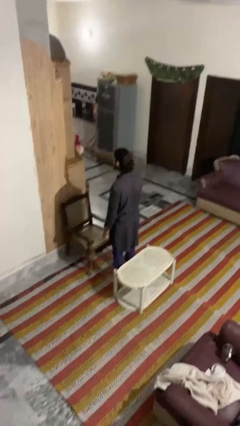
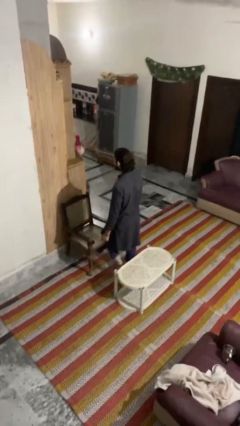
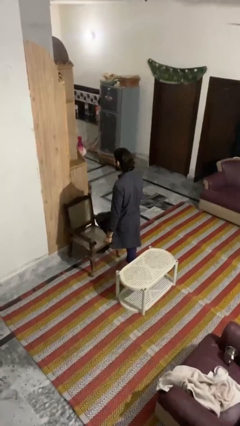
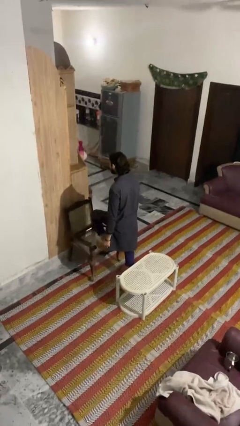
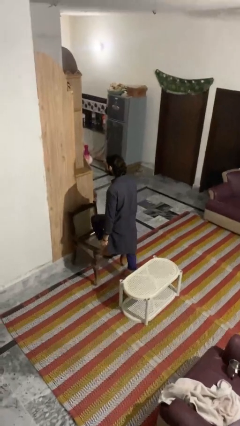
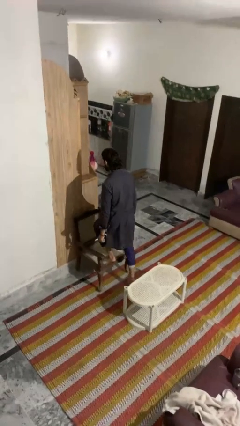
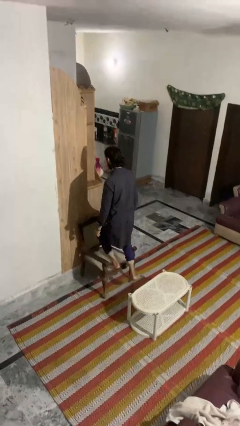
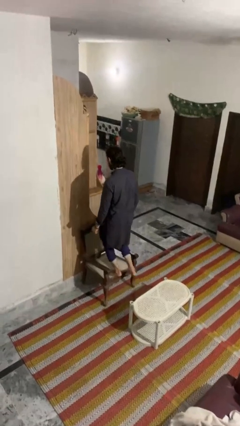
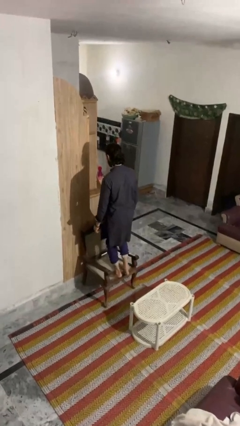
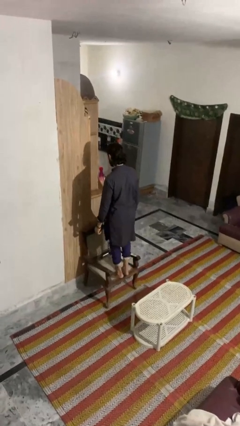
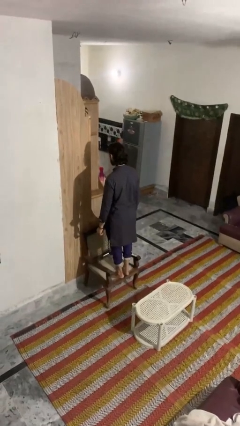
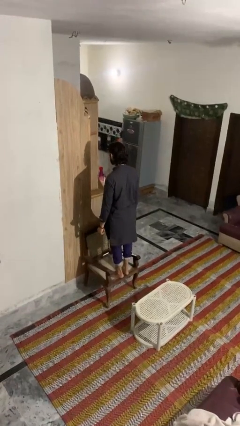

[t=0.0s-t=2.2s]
person climbs on chair

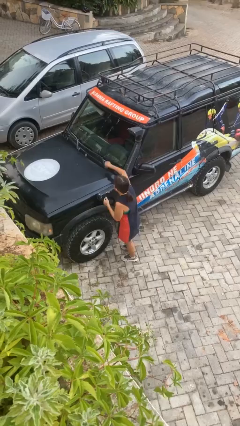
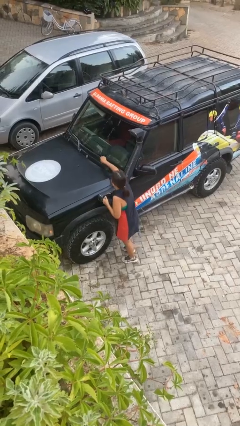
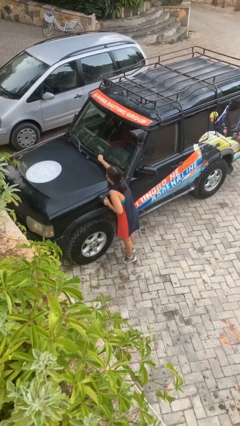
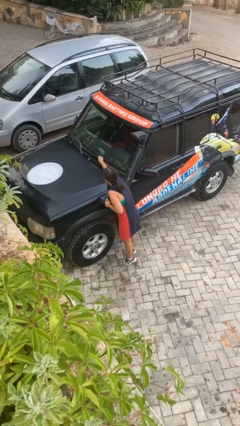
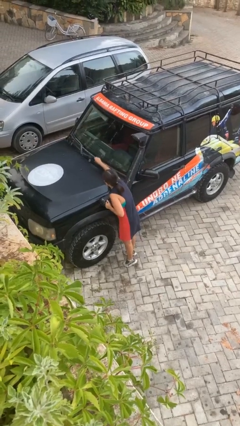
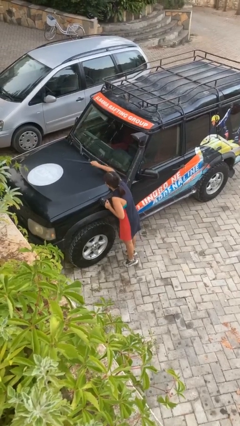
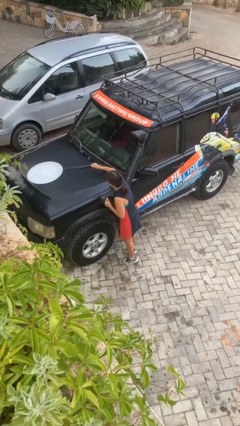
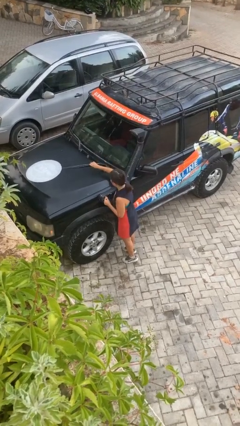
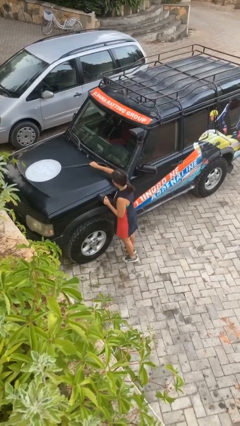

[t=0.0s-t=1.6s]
person flips up car wipers

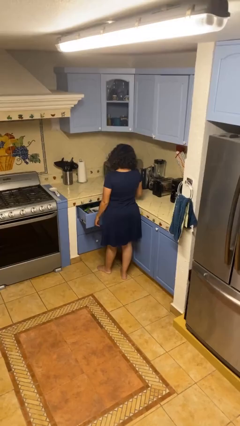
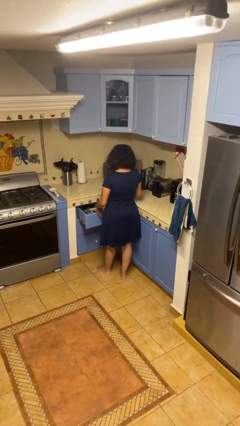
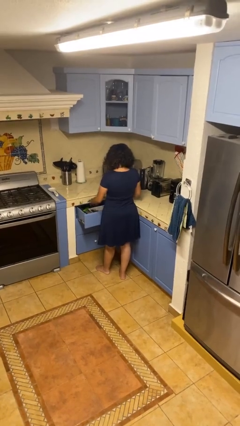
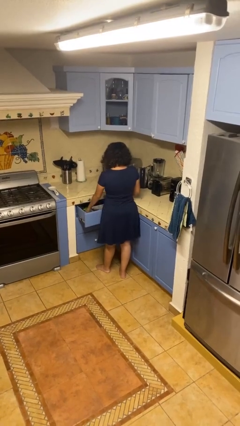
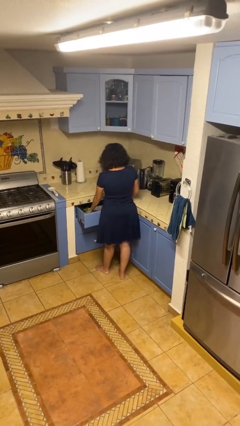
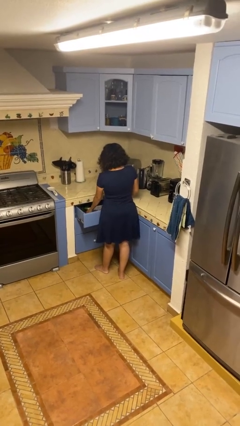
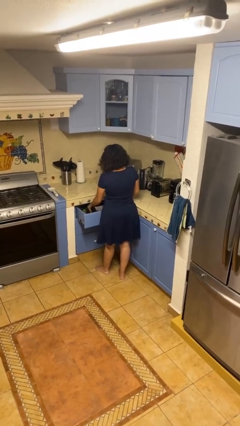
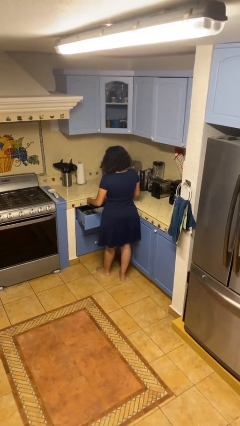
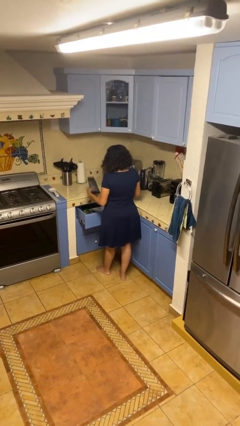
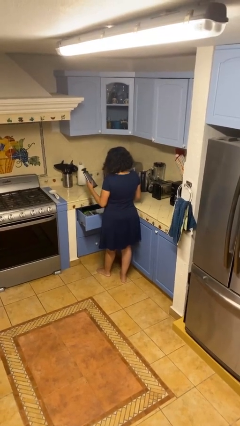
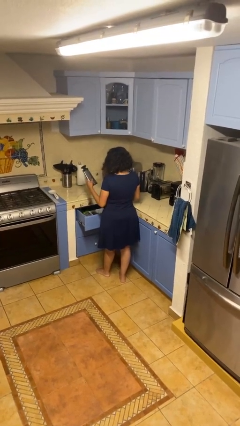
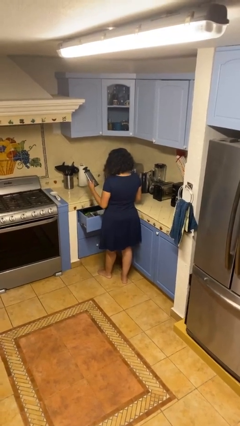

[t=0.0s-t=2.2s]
person takes object from kitchen drawer

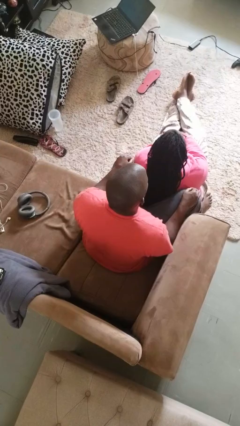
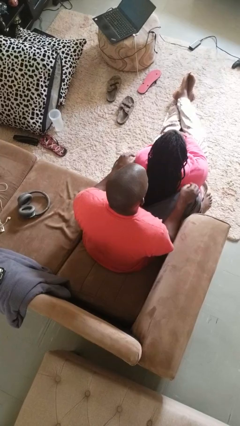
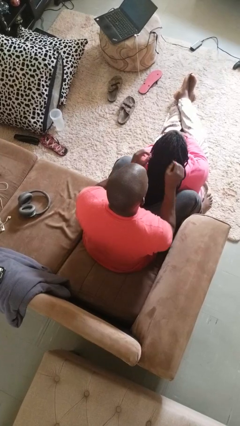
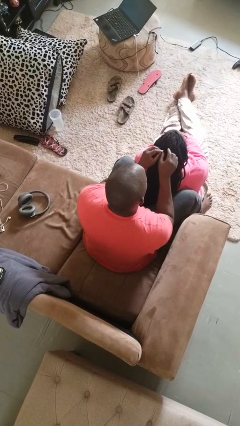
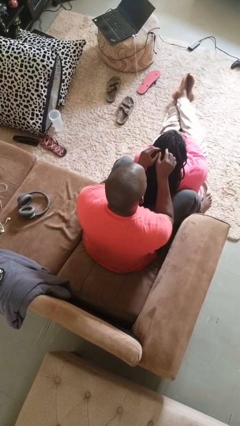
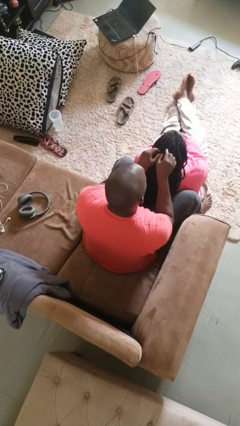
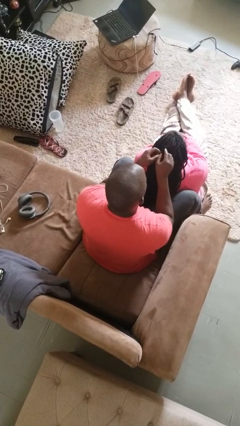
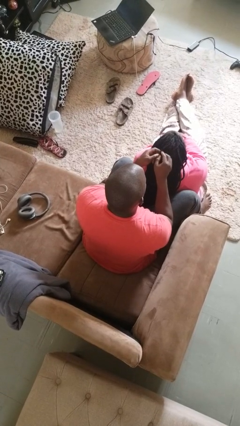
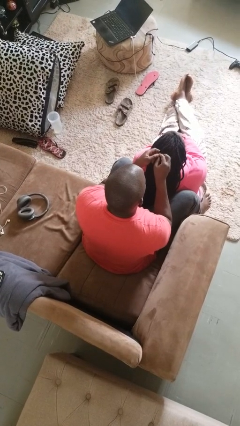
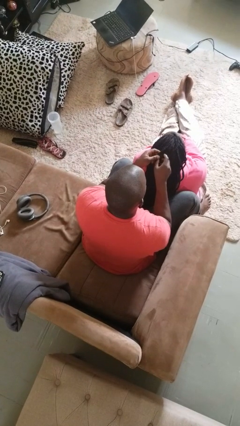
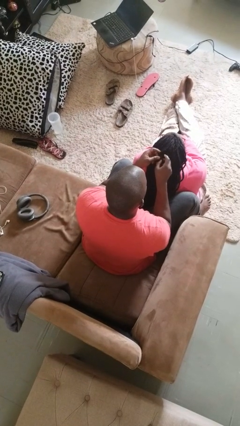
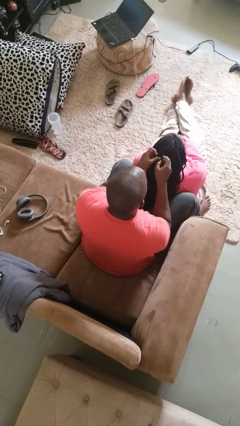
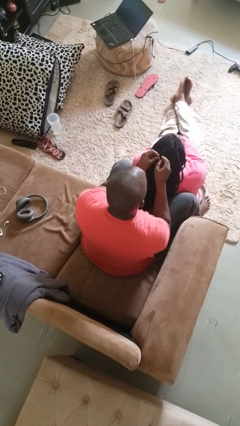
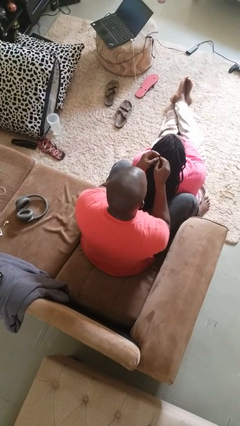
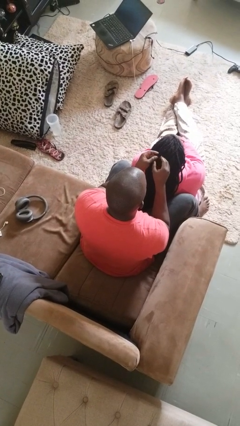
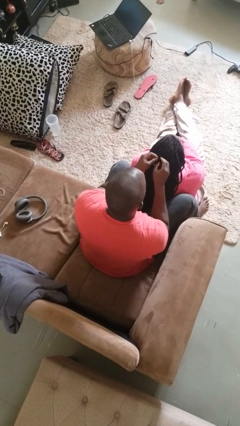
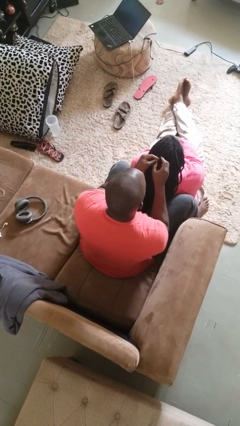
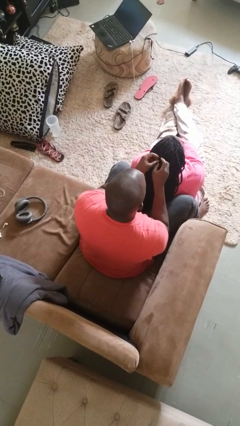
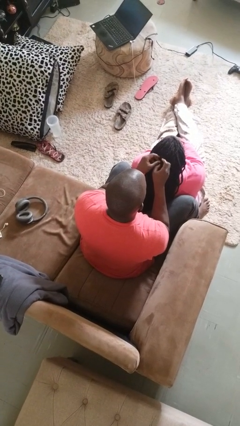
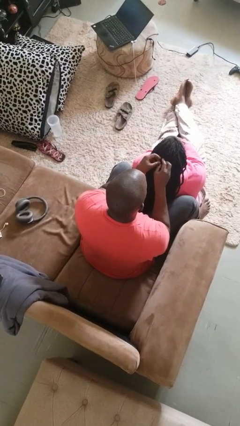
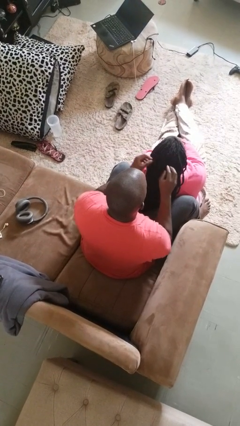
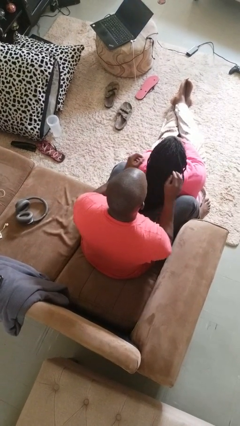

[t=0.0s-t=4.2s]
person braids hair of person

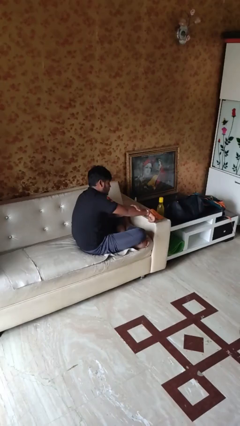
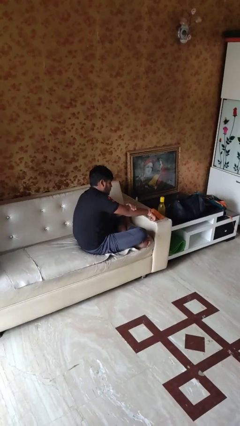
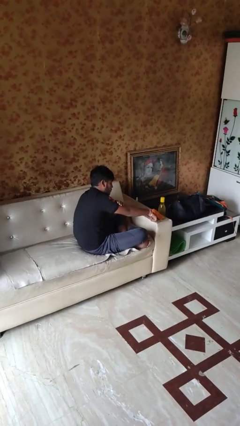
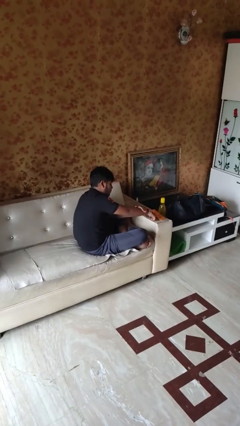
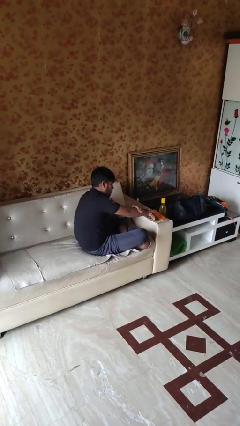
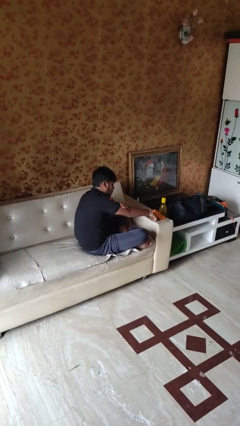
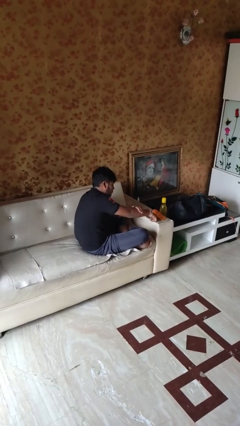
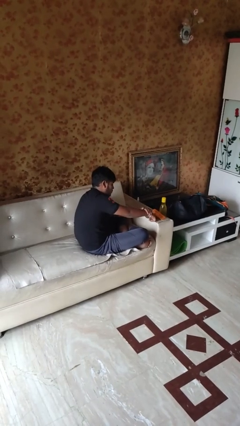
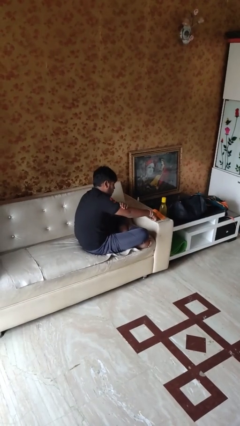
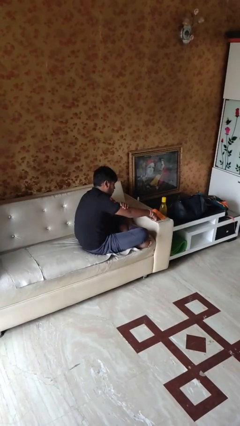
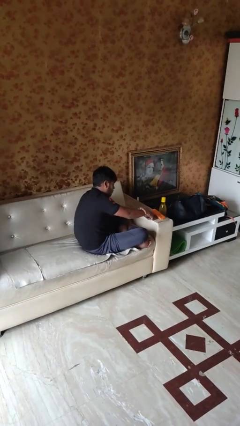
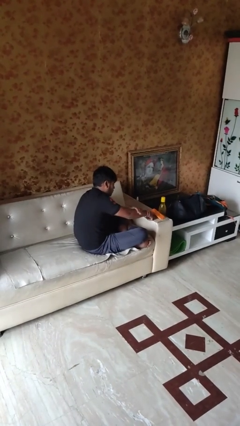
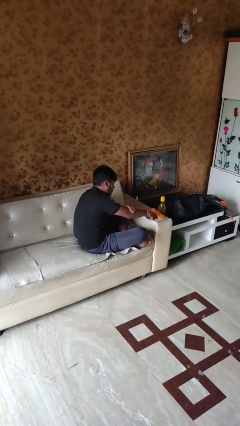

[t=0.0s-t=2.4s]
person applies sunscreen

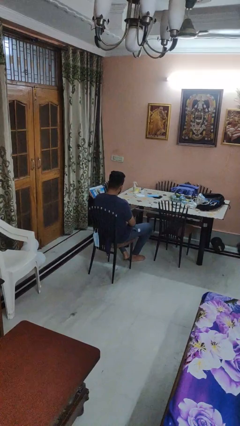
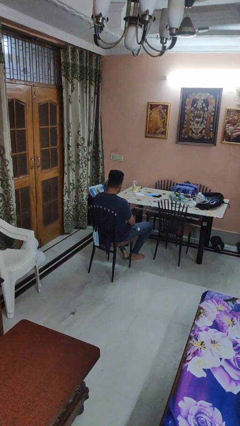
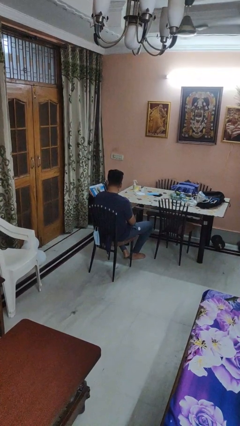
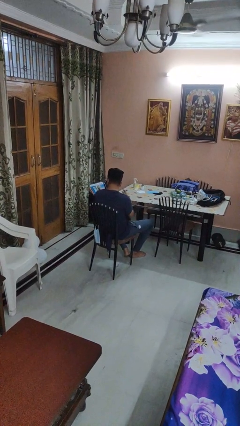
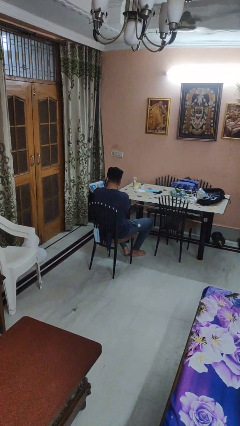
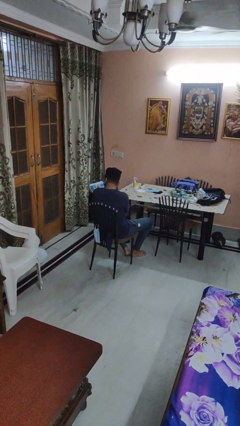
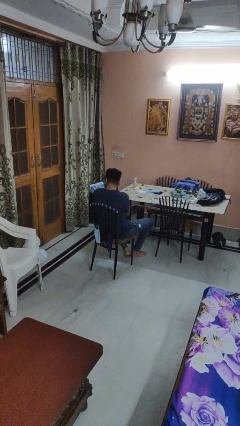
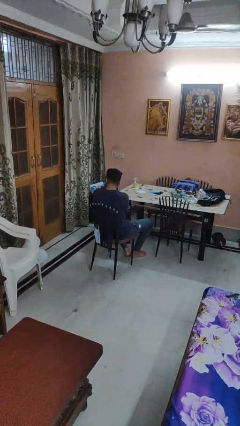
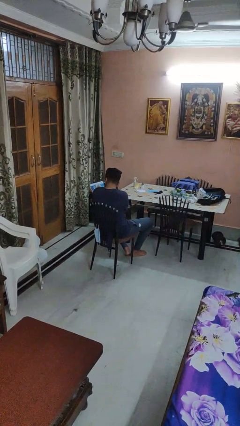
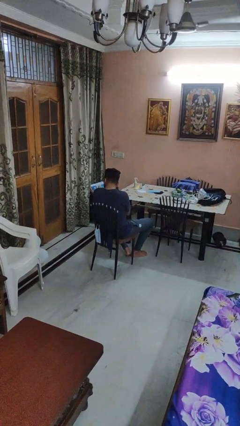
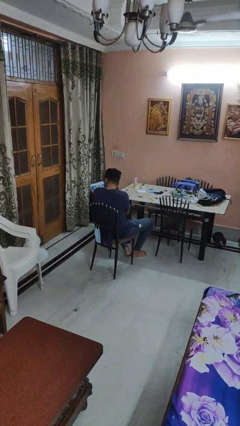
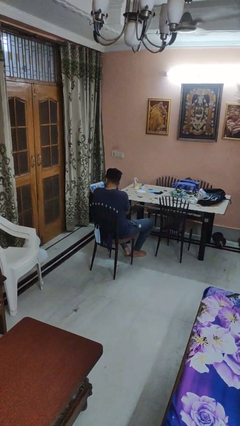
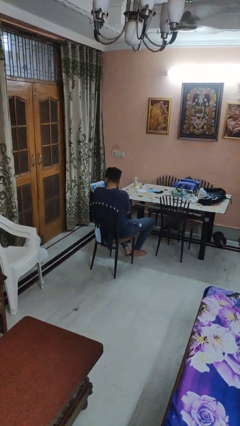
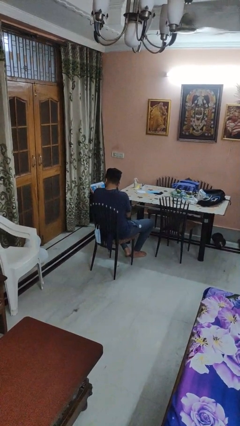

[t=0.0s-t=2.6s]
person swats bug

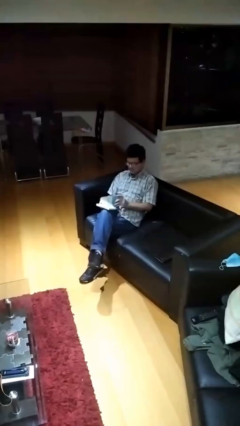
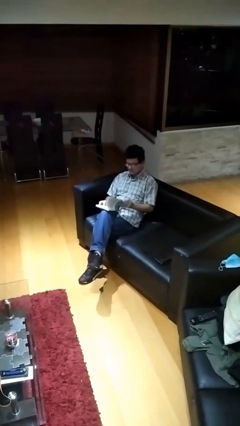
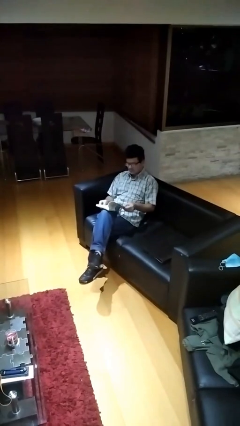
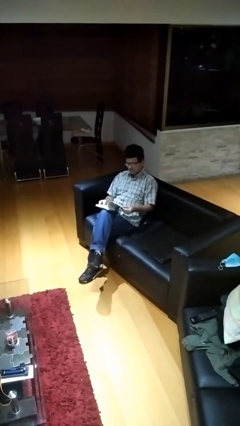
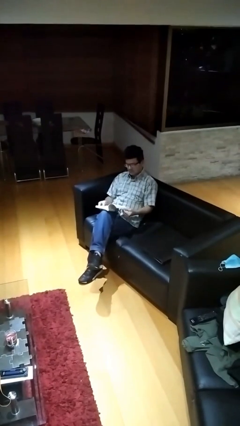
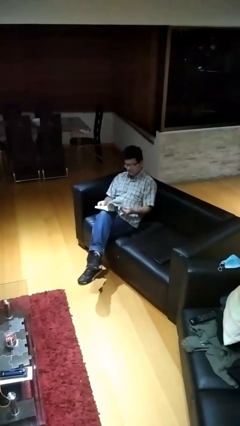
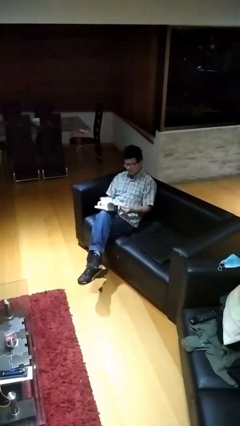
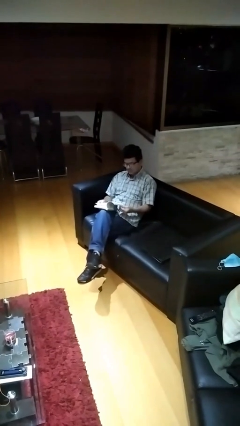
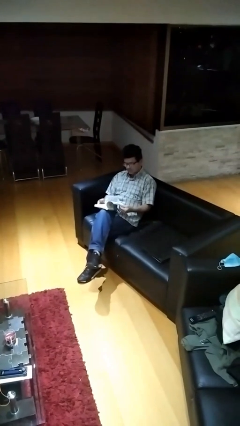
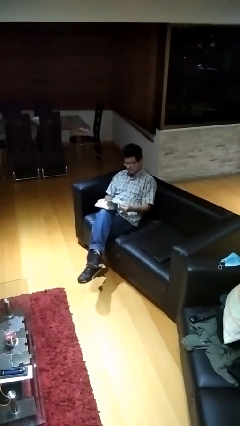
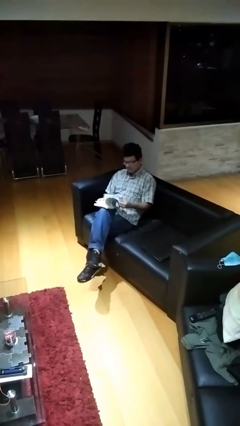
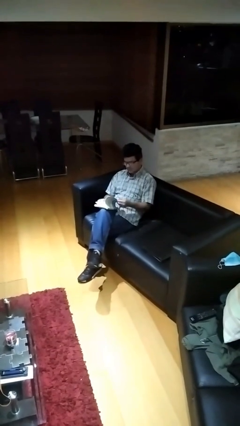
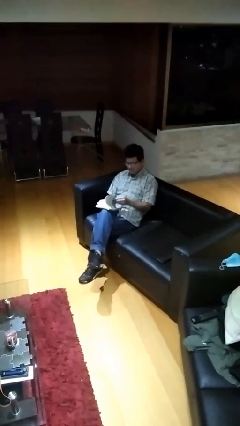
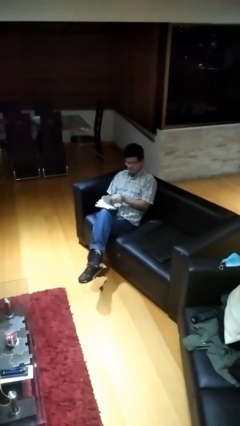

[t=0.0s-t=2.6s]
person reads document
